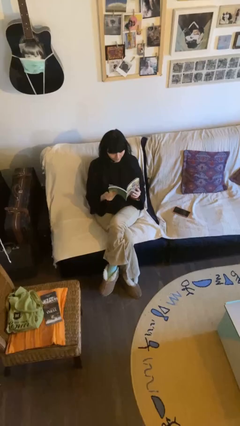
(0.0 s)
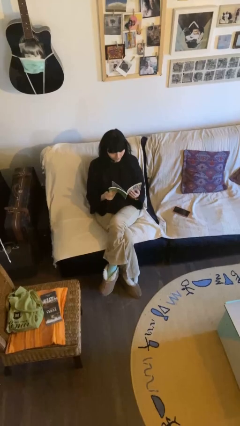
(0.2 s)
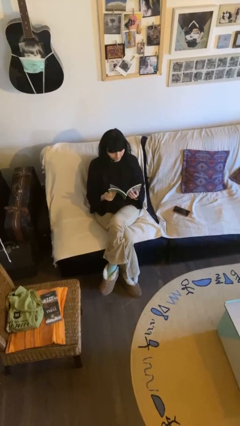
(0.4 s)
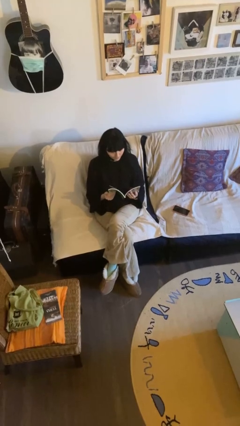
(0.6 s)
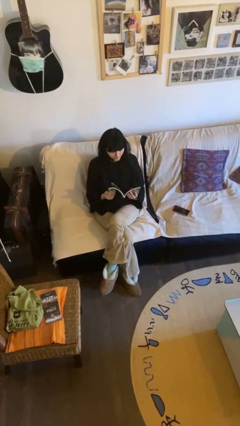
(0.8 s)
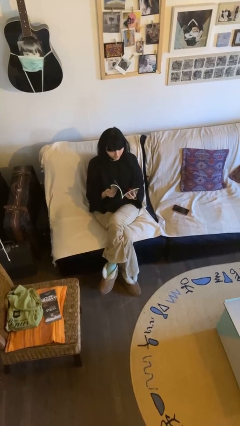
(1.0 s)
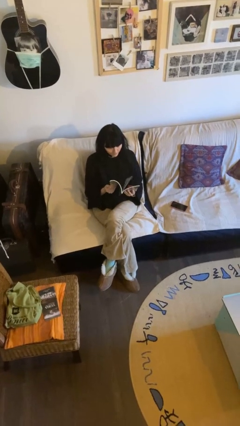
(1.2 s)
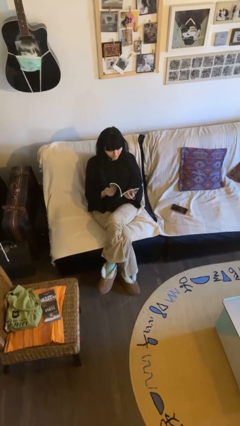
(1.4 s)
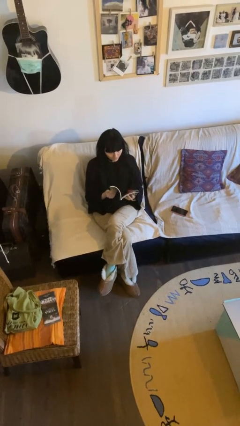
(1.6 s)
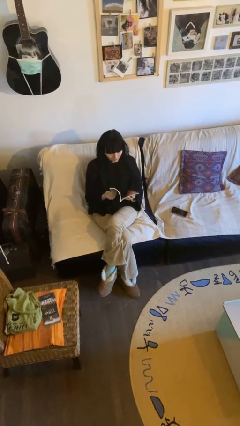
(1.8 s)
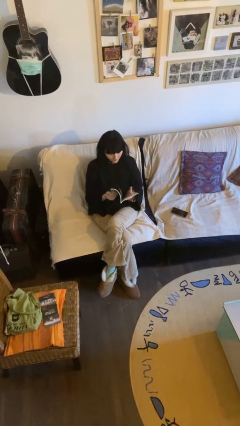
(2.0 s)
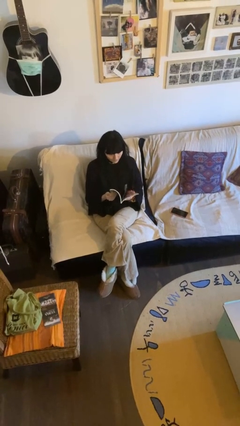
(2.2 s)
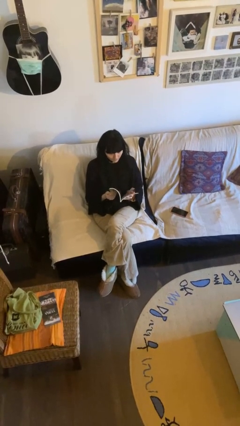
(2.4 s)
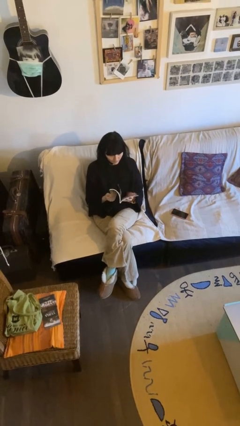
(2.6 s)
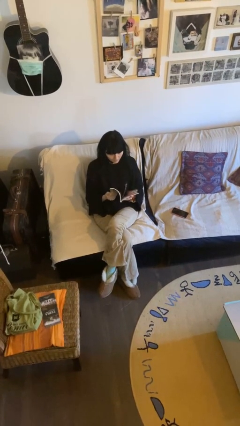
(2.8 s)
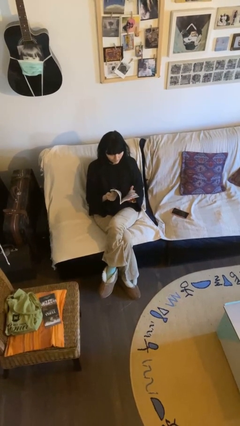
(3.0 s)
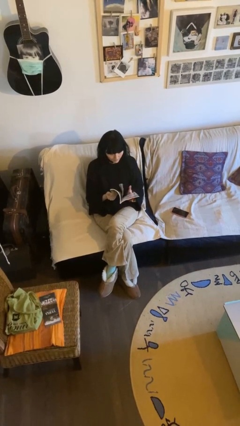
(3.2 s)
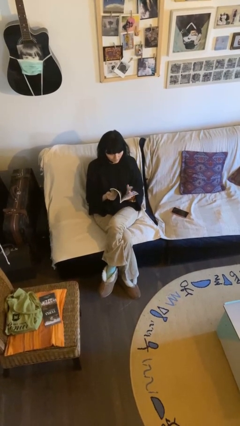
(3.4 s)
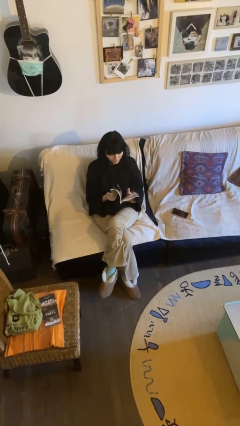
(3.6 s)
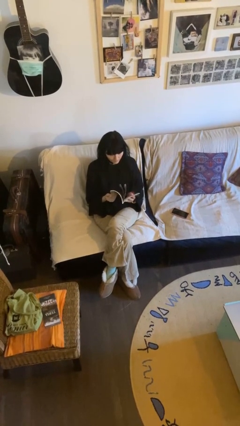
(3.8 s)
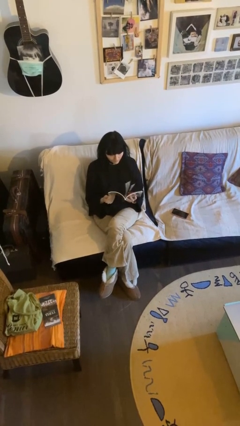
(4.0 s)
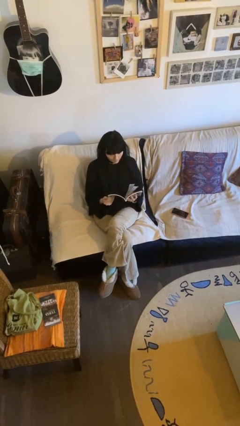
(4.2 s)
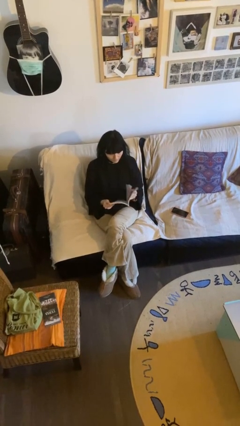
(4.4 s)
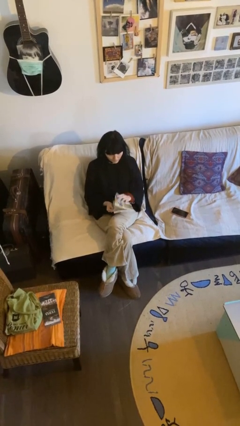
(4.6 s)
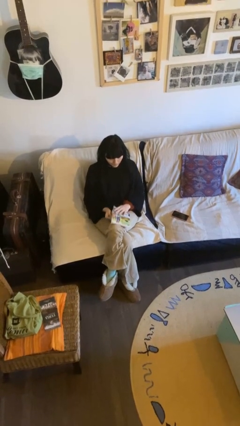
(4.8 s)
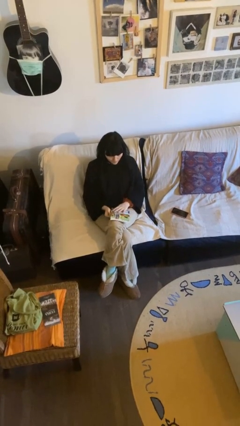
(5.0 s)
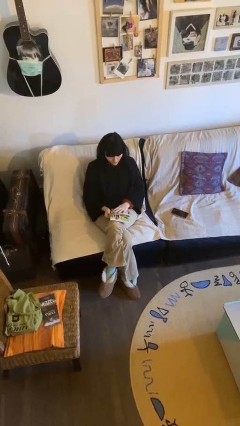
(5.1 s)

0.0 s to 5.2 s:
person reads document

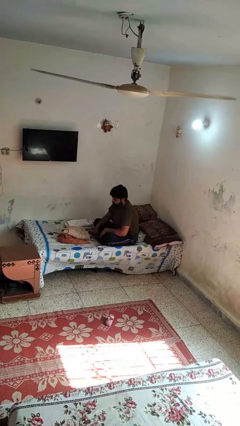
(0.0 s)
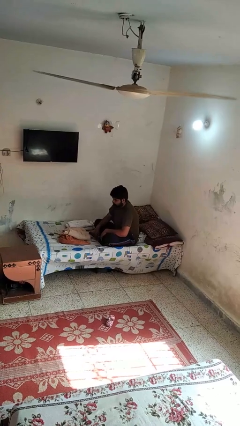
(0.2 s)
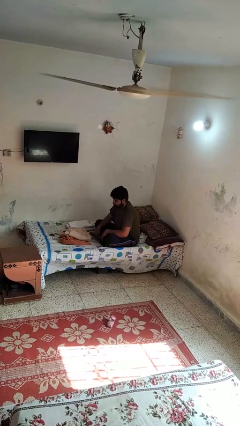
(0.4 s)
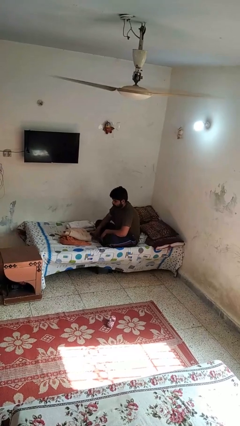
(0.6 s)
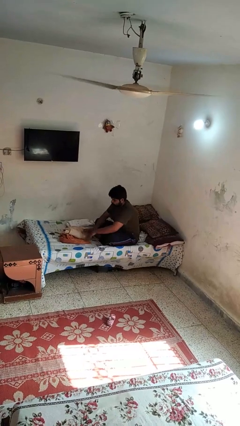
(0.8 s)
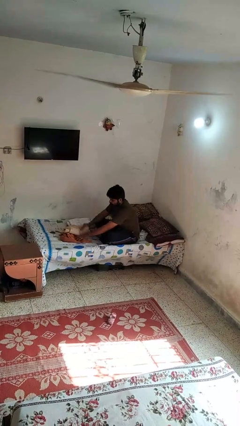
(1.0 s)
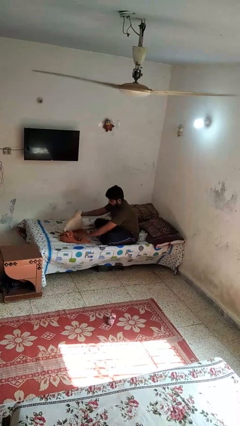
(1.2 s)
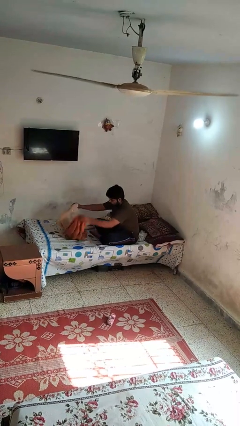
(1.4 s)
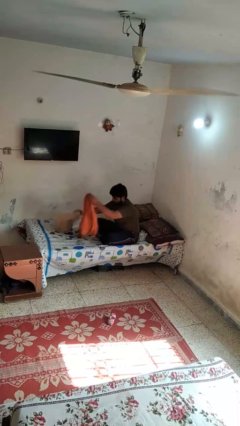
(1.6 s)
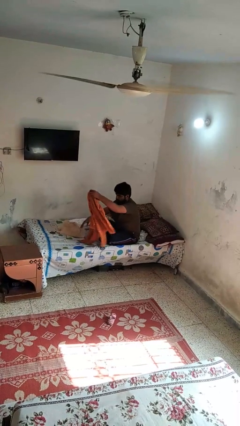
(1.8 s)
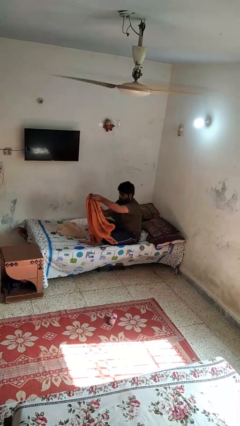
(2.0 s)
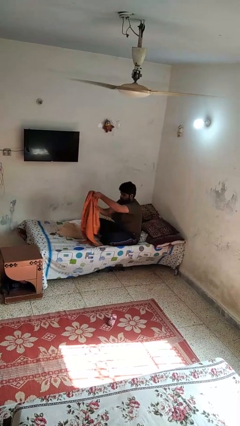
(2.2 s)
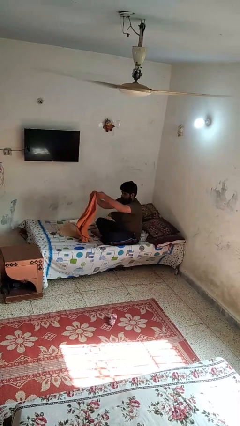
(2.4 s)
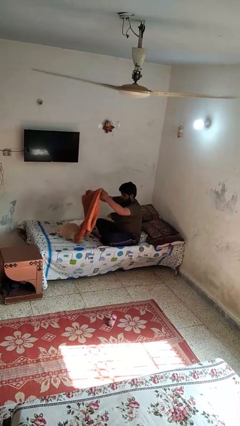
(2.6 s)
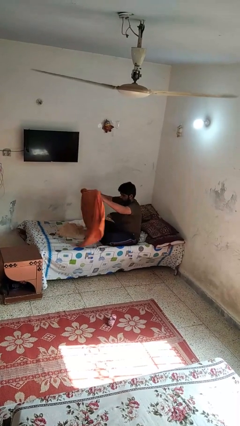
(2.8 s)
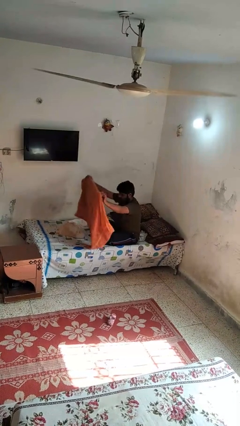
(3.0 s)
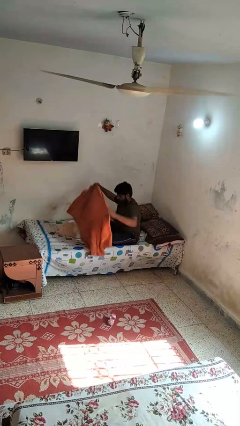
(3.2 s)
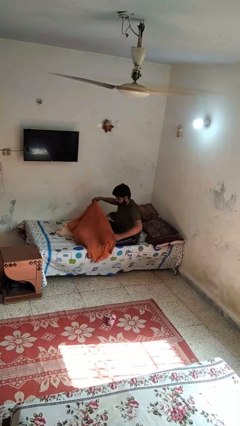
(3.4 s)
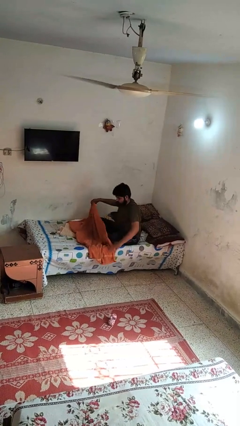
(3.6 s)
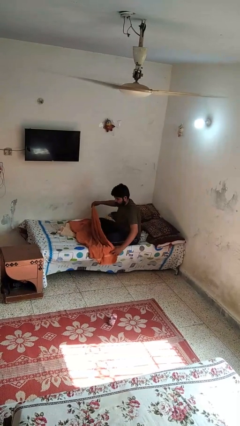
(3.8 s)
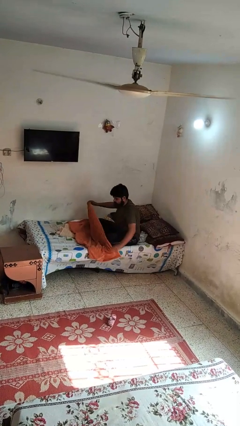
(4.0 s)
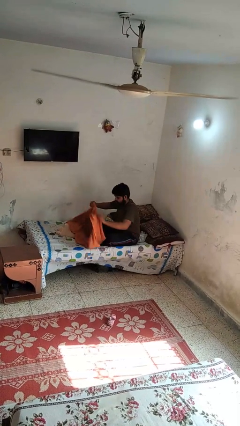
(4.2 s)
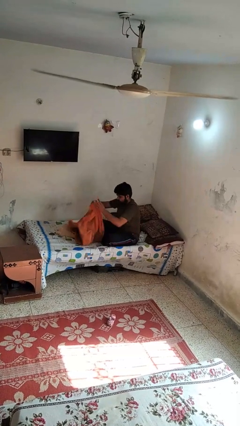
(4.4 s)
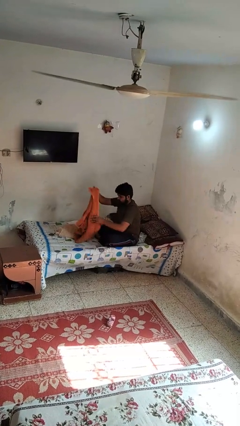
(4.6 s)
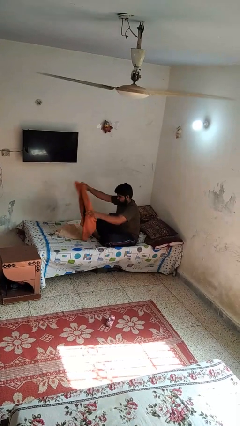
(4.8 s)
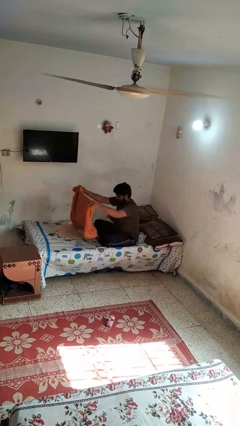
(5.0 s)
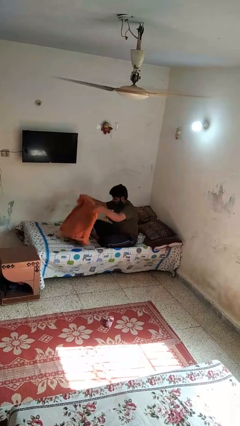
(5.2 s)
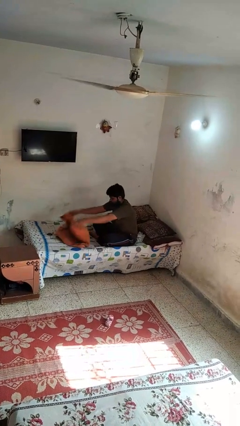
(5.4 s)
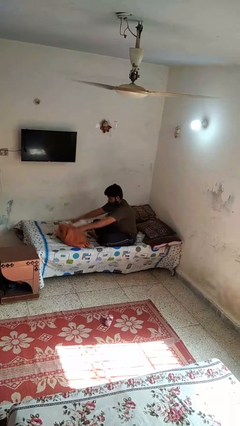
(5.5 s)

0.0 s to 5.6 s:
person folds towel

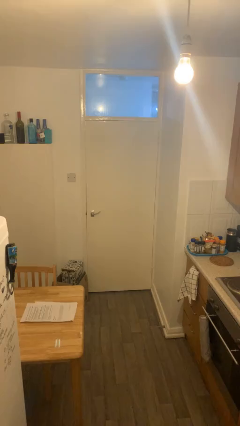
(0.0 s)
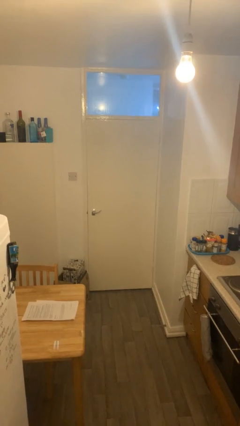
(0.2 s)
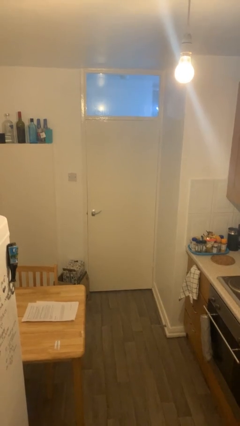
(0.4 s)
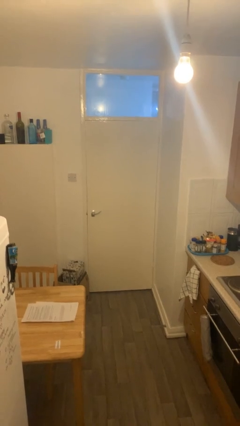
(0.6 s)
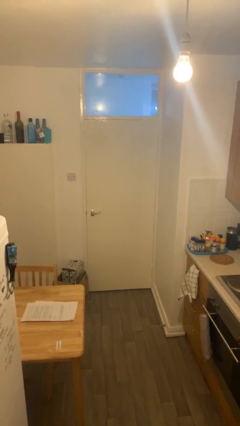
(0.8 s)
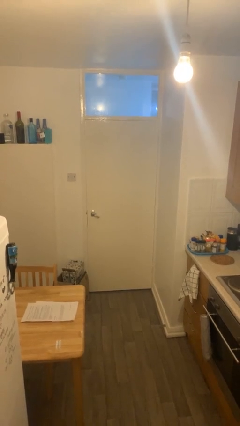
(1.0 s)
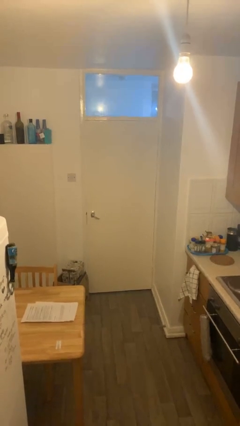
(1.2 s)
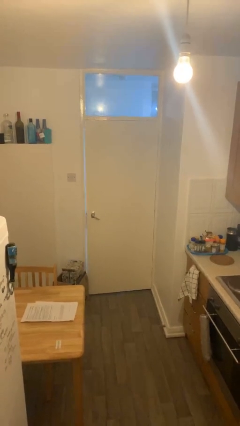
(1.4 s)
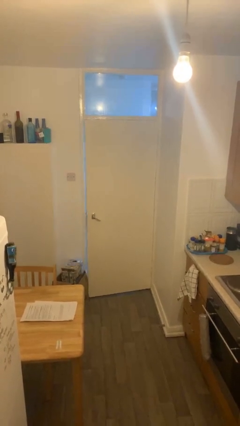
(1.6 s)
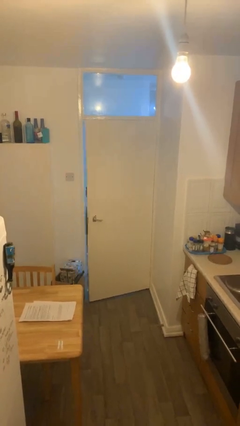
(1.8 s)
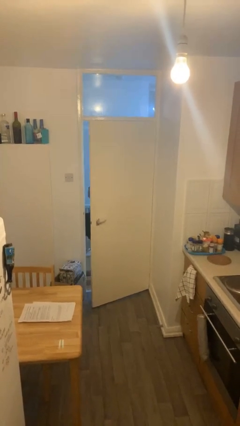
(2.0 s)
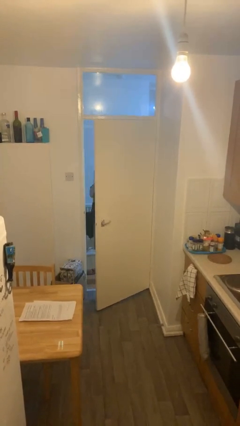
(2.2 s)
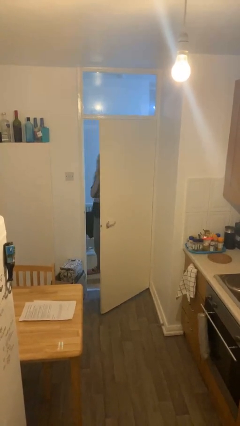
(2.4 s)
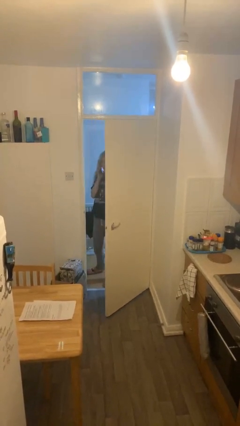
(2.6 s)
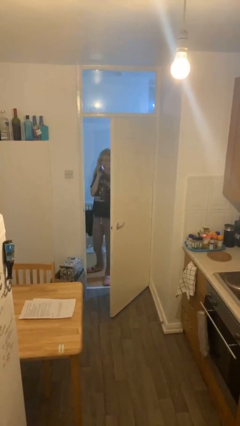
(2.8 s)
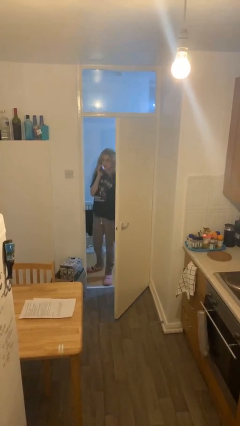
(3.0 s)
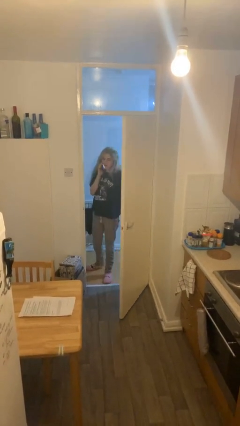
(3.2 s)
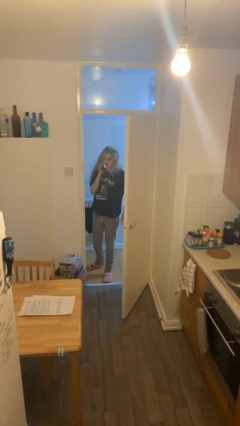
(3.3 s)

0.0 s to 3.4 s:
person opens facility door

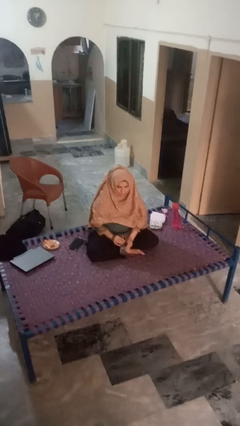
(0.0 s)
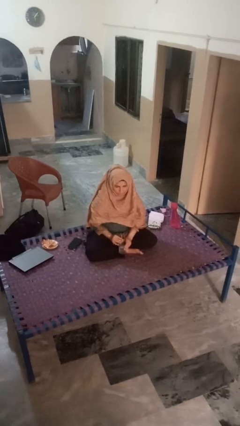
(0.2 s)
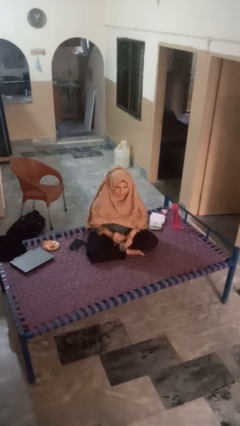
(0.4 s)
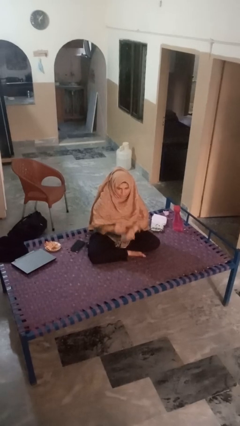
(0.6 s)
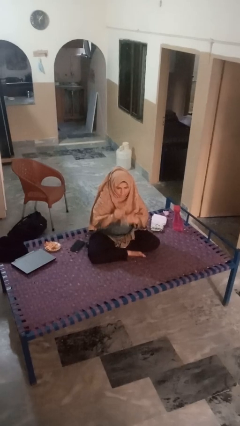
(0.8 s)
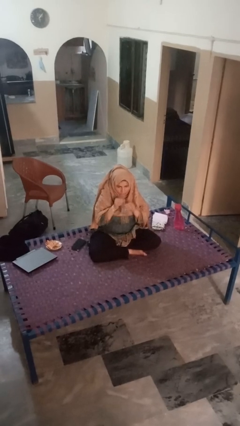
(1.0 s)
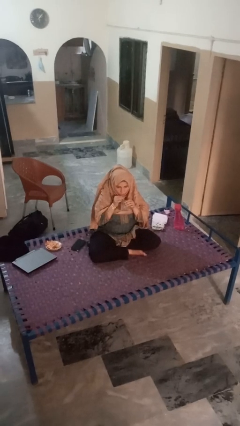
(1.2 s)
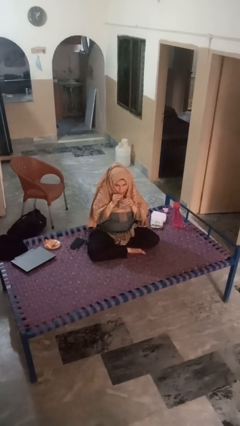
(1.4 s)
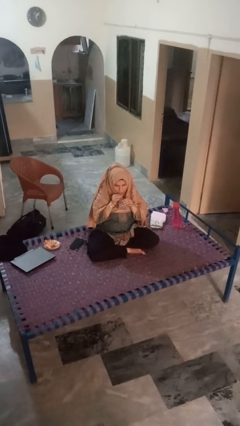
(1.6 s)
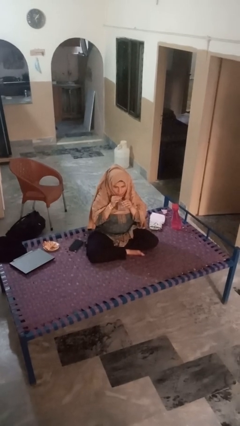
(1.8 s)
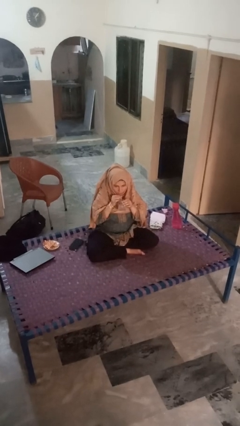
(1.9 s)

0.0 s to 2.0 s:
person drinks from straw

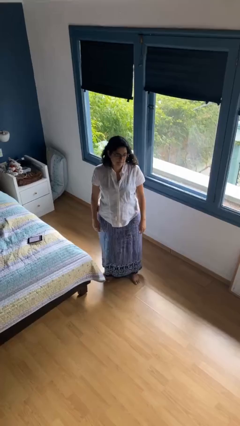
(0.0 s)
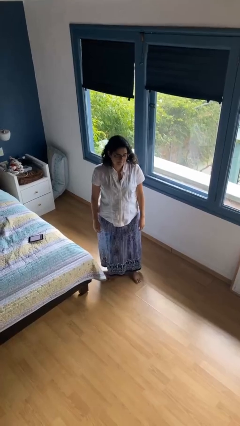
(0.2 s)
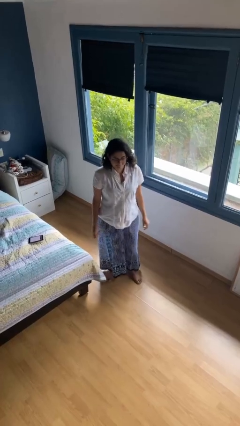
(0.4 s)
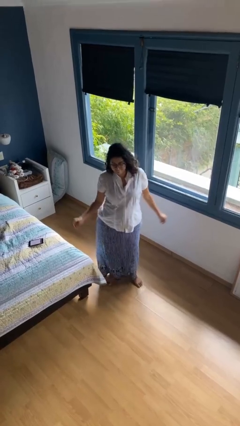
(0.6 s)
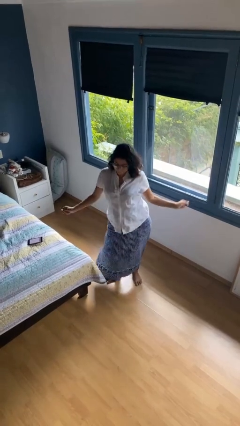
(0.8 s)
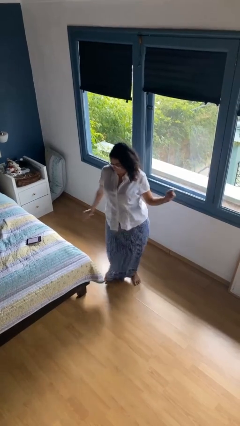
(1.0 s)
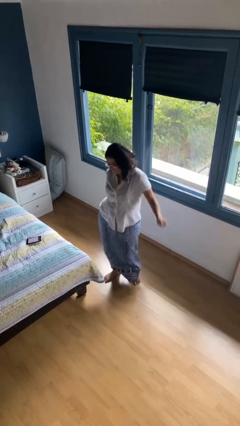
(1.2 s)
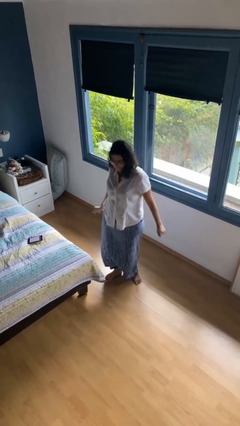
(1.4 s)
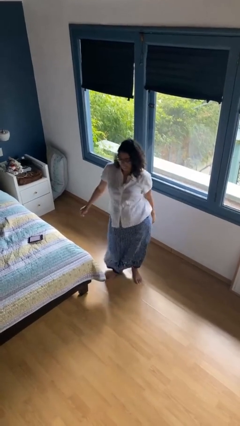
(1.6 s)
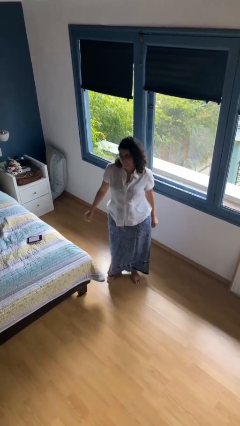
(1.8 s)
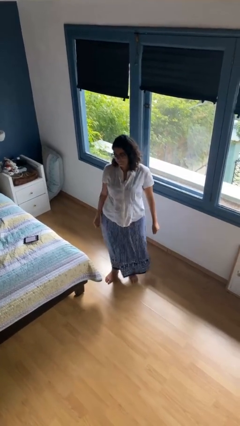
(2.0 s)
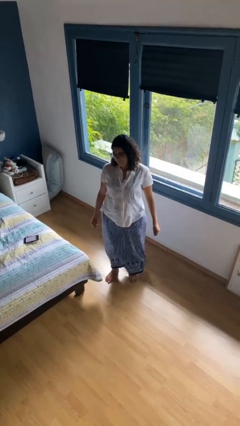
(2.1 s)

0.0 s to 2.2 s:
person dances in place
